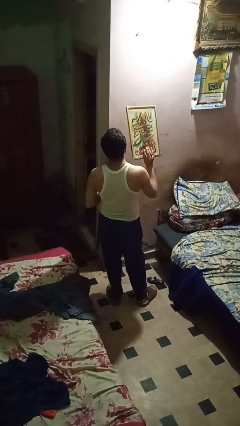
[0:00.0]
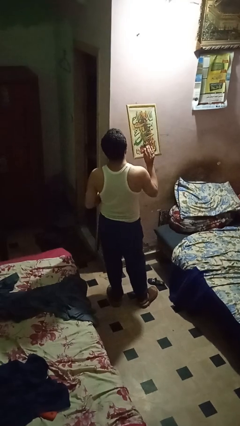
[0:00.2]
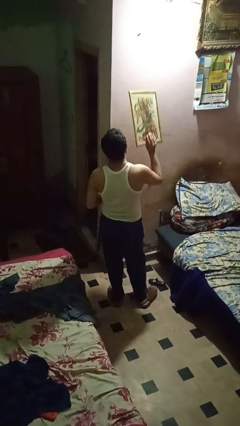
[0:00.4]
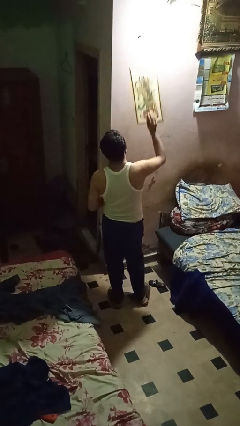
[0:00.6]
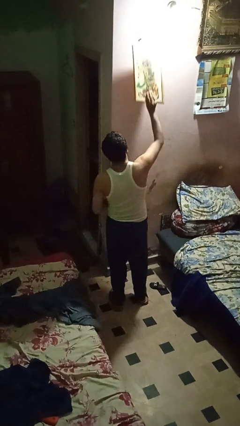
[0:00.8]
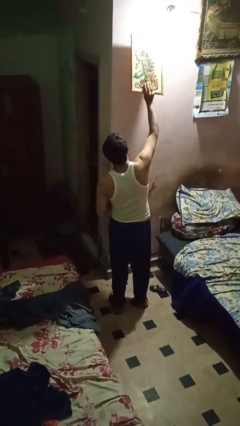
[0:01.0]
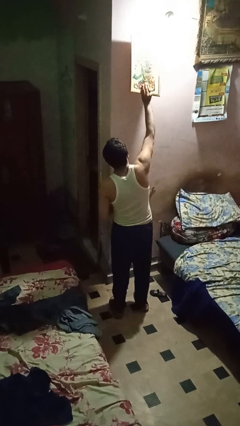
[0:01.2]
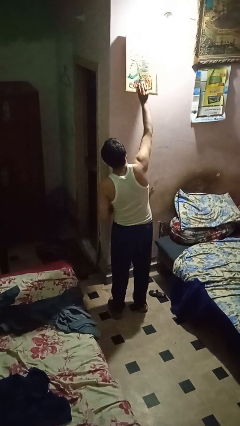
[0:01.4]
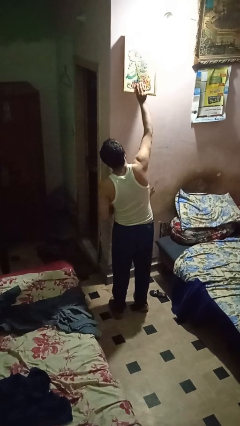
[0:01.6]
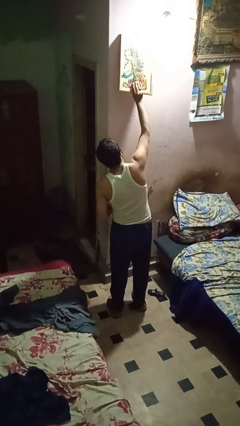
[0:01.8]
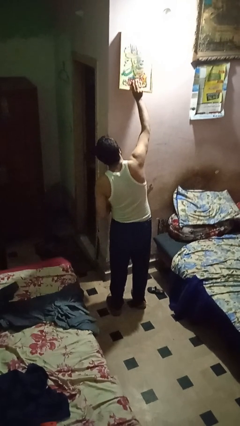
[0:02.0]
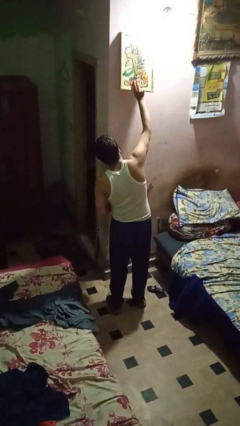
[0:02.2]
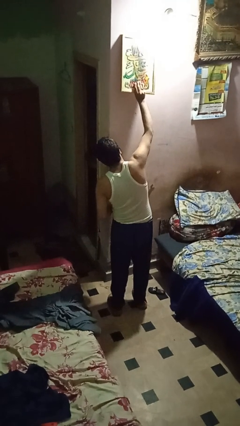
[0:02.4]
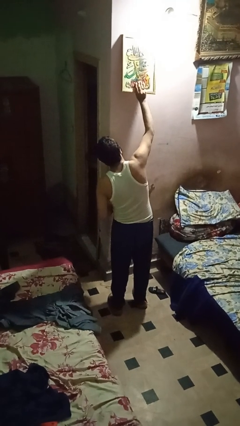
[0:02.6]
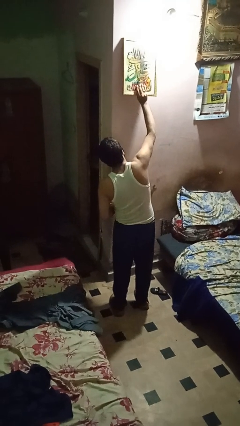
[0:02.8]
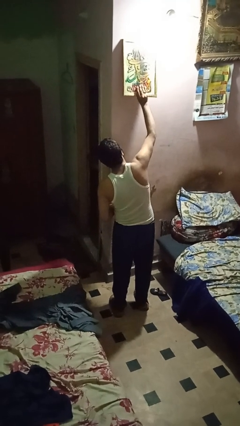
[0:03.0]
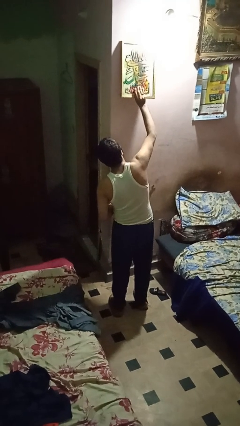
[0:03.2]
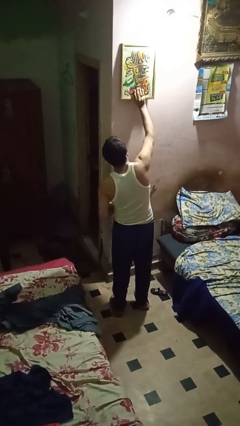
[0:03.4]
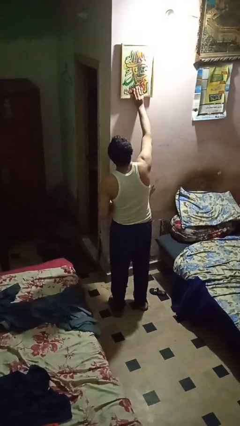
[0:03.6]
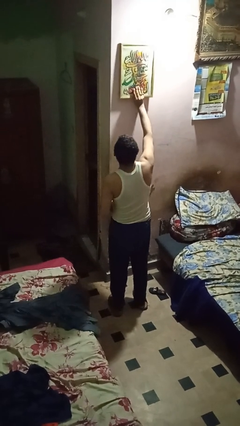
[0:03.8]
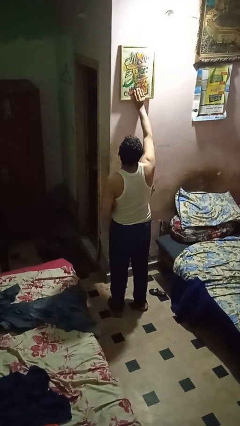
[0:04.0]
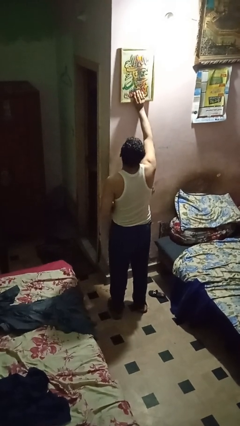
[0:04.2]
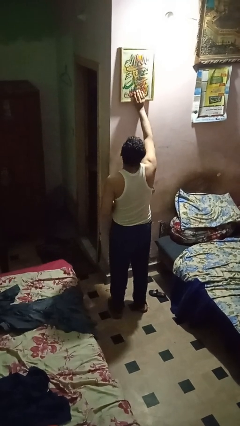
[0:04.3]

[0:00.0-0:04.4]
person puts up picture frame

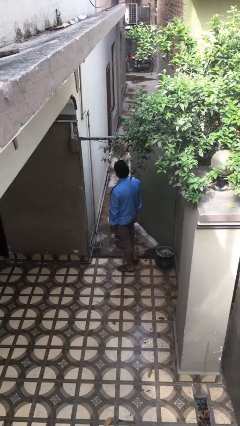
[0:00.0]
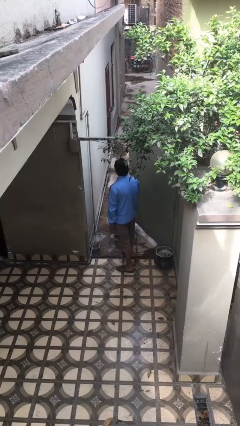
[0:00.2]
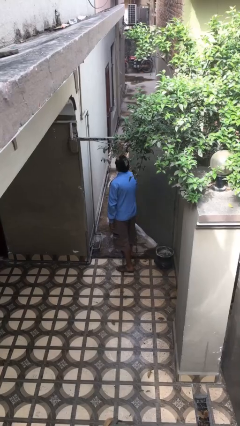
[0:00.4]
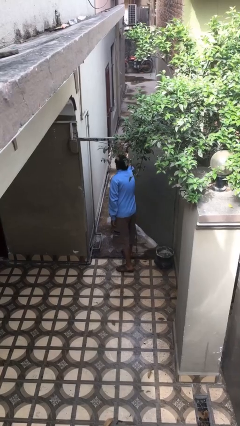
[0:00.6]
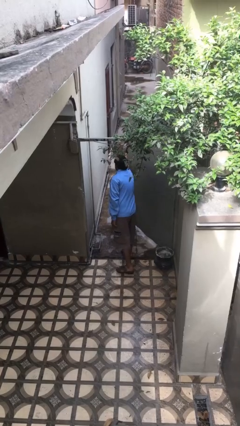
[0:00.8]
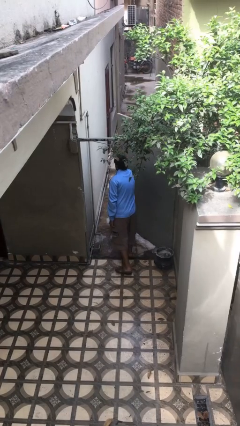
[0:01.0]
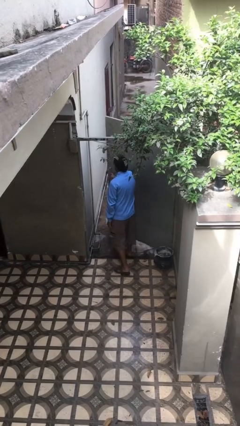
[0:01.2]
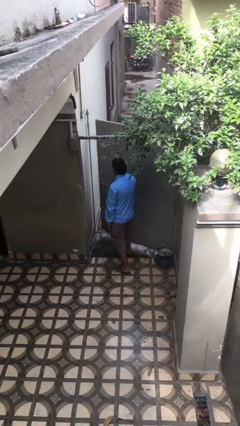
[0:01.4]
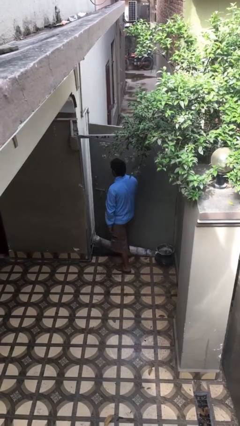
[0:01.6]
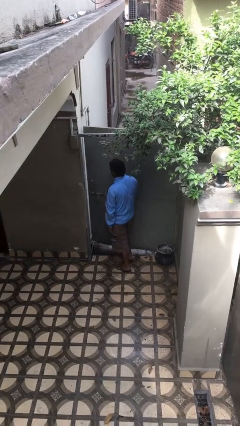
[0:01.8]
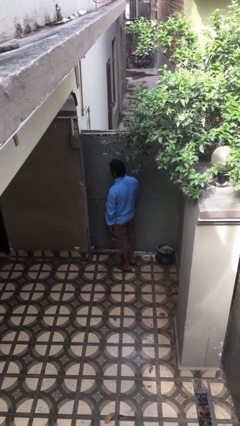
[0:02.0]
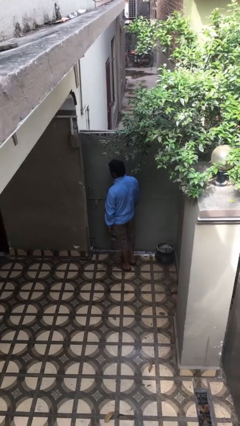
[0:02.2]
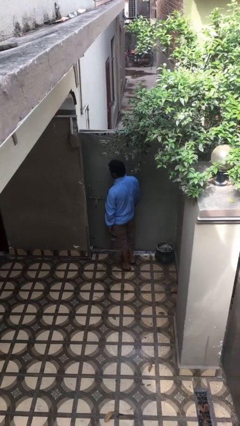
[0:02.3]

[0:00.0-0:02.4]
person closes facility door

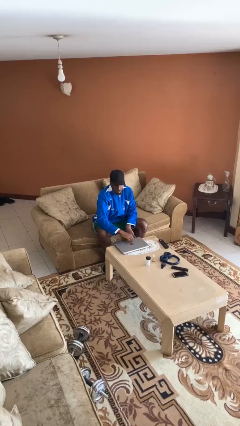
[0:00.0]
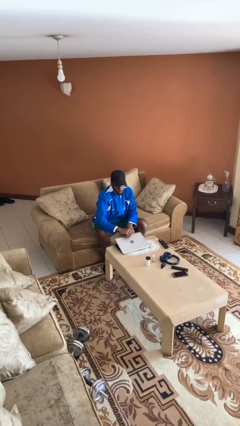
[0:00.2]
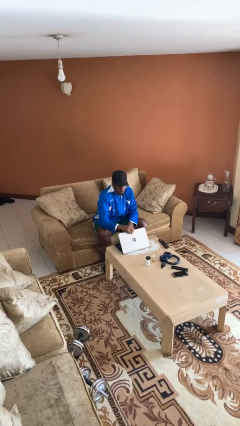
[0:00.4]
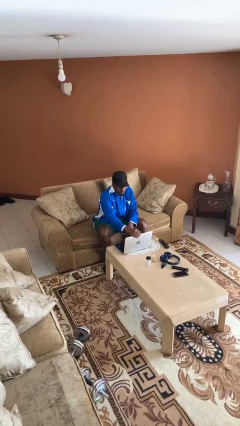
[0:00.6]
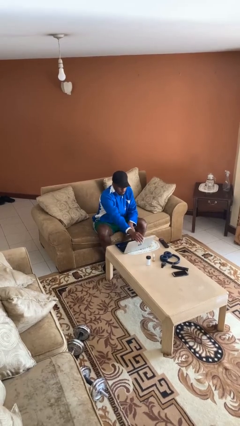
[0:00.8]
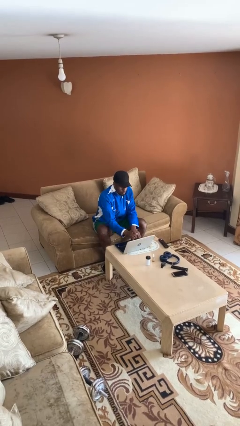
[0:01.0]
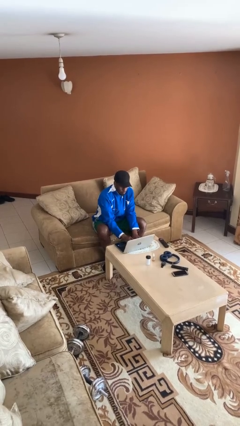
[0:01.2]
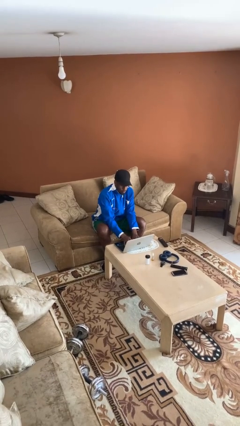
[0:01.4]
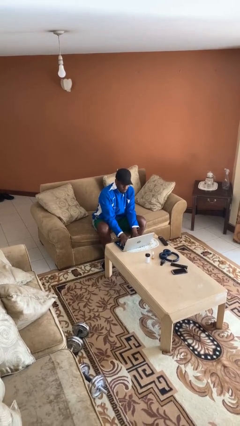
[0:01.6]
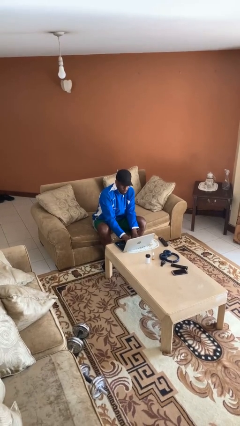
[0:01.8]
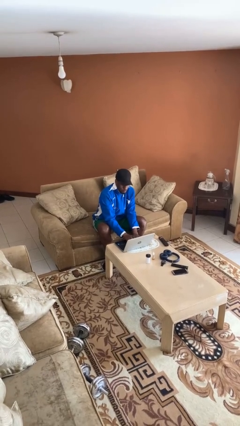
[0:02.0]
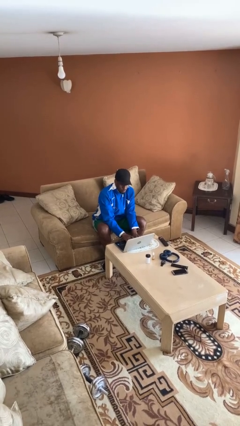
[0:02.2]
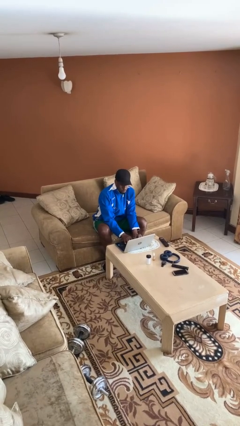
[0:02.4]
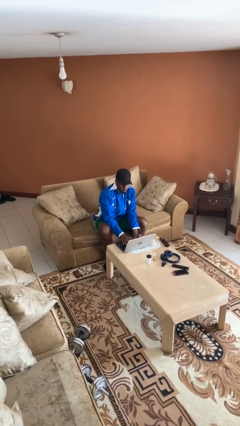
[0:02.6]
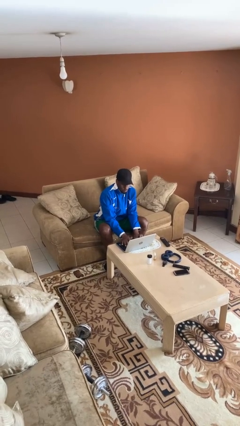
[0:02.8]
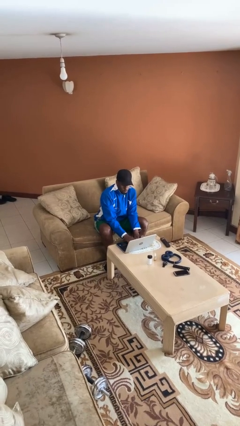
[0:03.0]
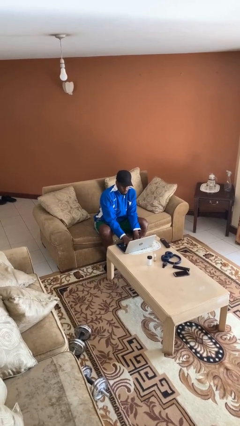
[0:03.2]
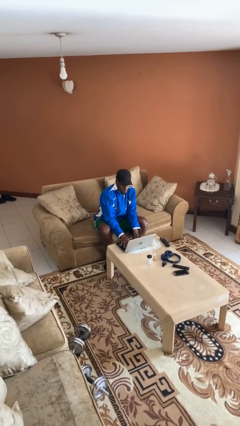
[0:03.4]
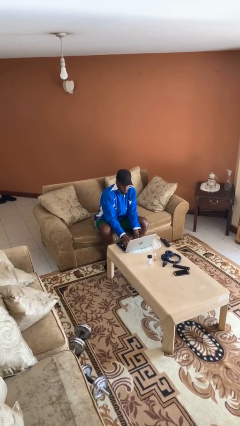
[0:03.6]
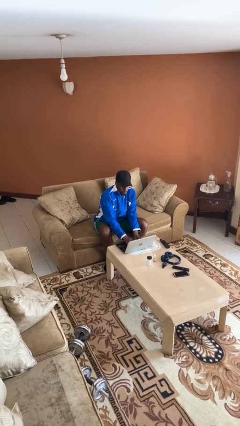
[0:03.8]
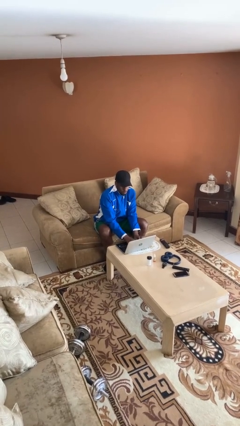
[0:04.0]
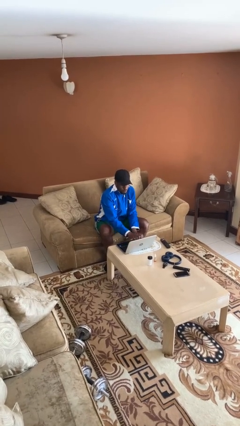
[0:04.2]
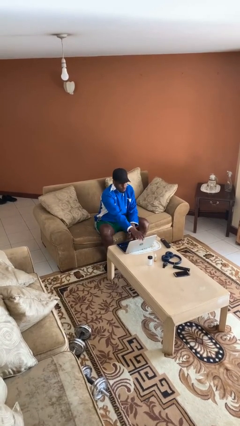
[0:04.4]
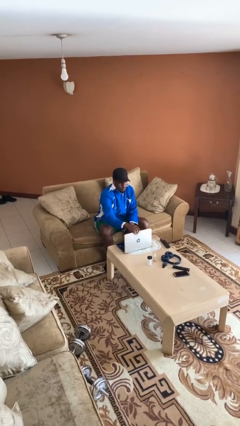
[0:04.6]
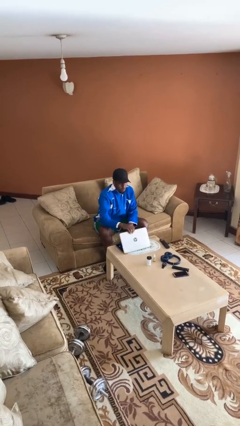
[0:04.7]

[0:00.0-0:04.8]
person interacts with laptop

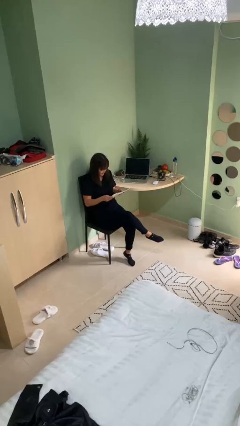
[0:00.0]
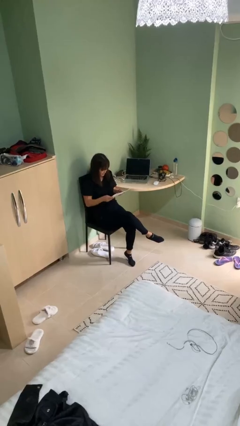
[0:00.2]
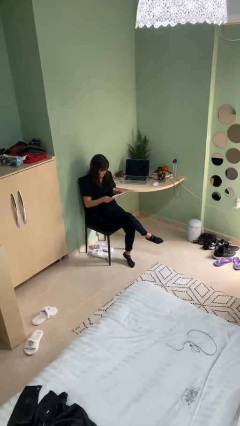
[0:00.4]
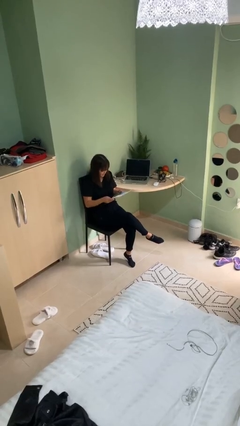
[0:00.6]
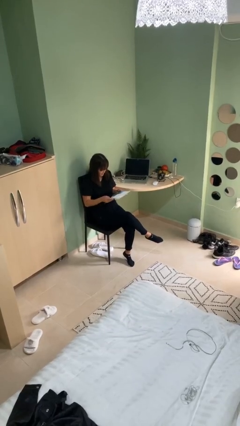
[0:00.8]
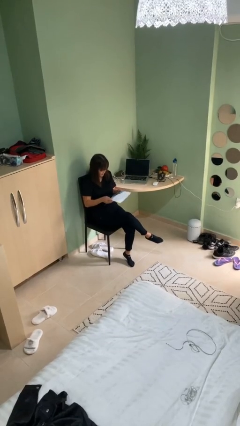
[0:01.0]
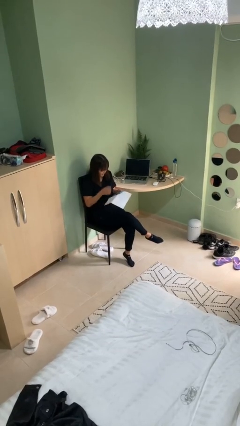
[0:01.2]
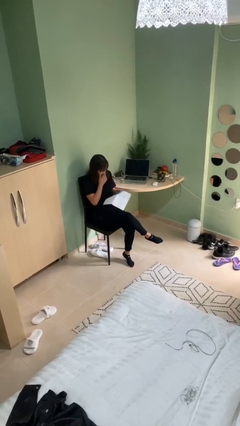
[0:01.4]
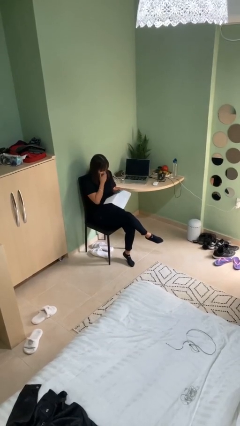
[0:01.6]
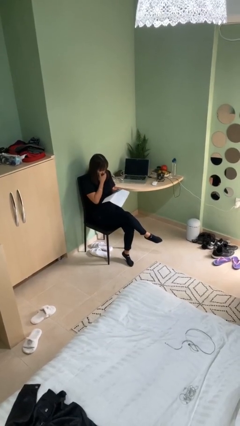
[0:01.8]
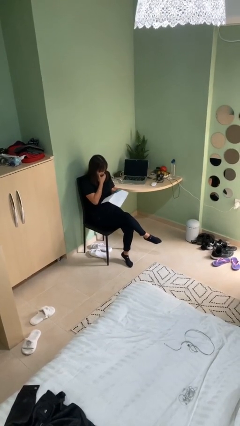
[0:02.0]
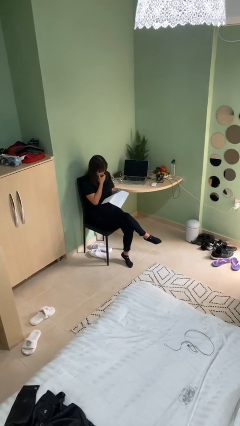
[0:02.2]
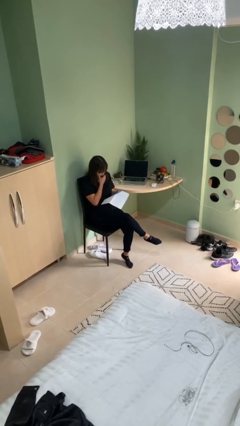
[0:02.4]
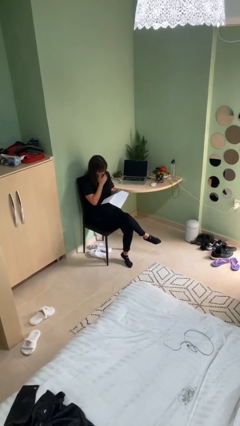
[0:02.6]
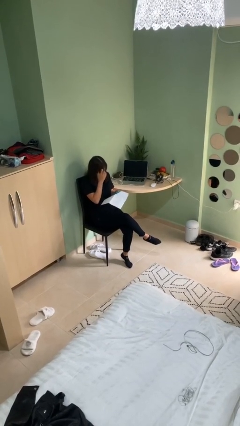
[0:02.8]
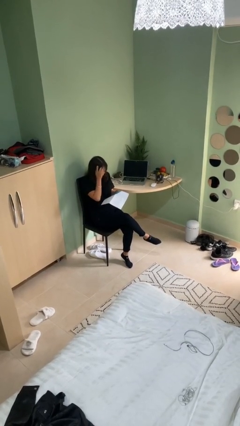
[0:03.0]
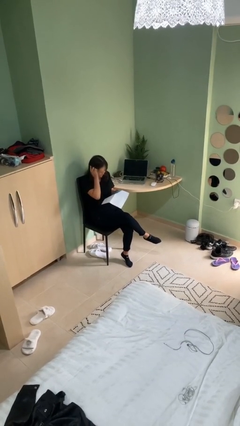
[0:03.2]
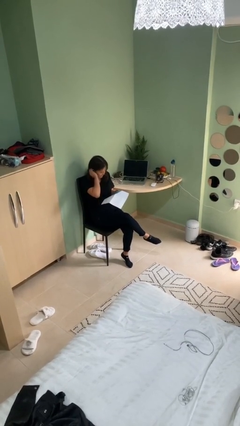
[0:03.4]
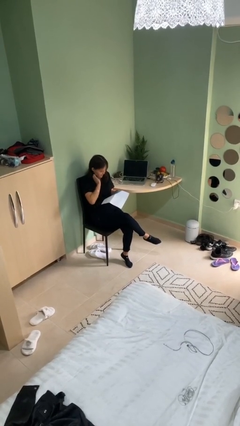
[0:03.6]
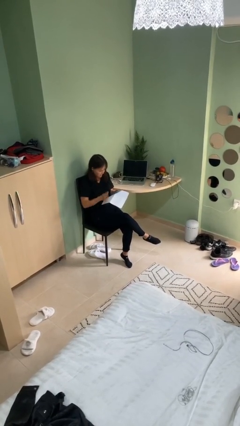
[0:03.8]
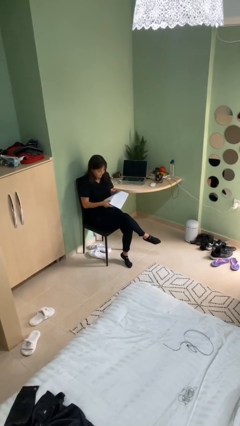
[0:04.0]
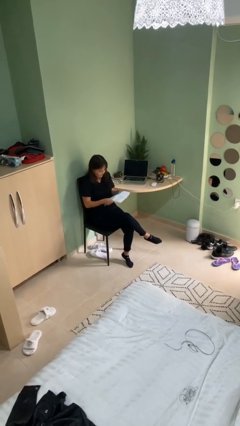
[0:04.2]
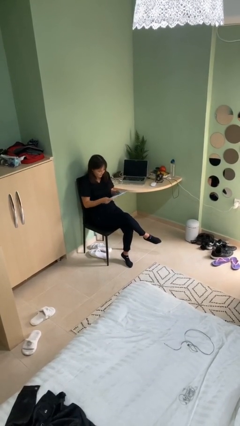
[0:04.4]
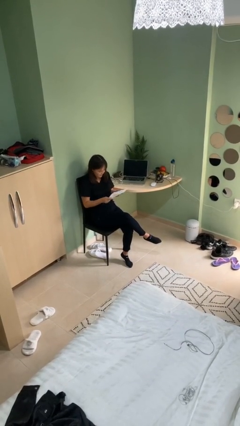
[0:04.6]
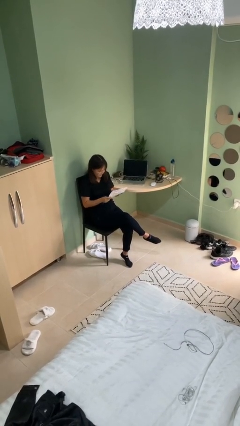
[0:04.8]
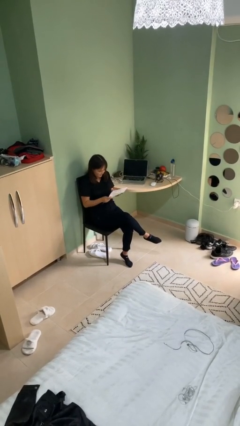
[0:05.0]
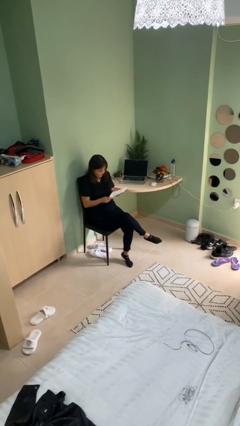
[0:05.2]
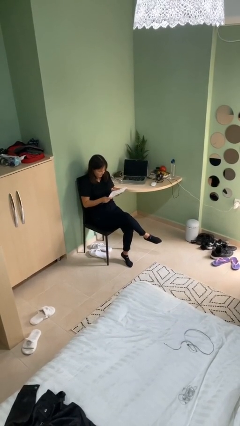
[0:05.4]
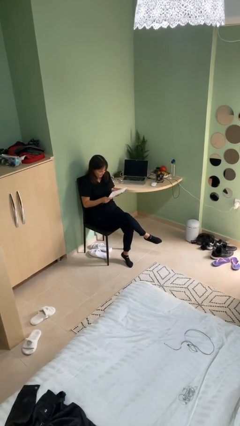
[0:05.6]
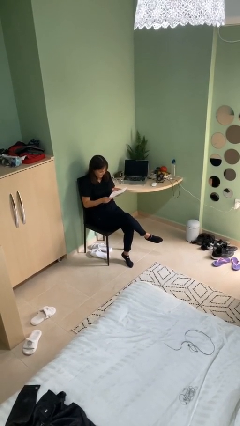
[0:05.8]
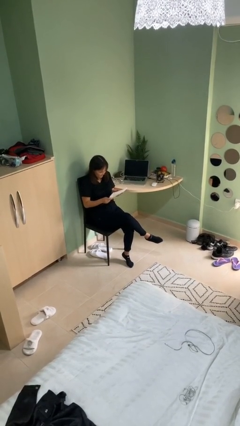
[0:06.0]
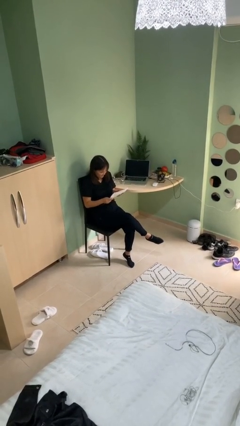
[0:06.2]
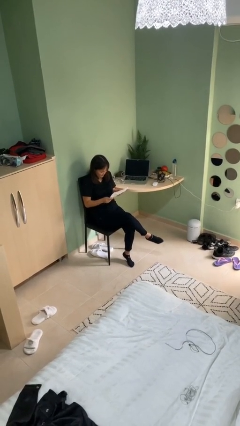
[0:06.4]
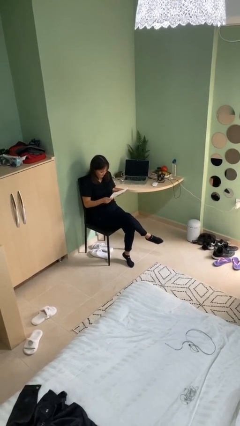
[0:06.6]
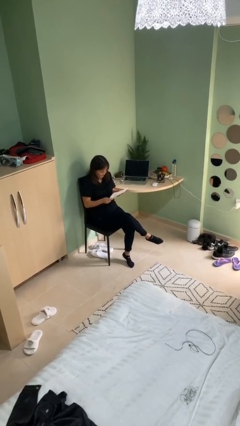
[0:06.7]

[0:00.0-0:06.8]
person reads document
